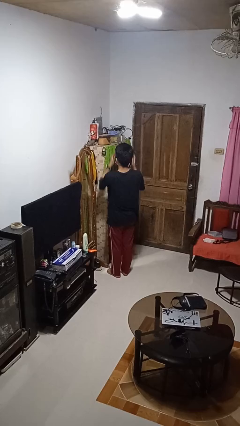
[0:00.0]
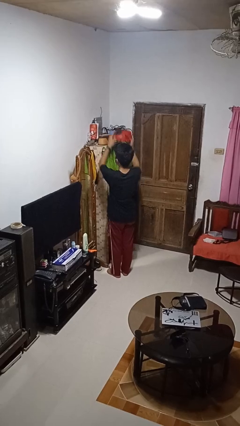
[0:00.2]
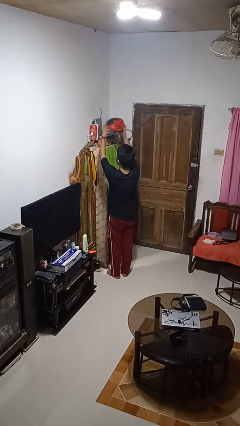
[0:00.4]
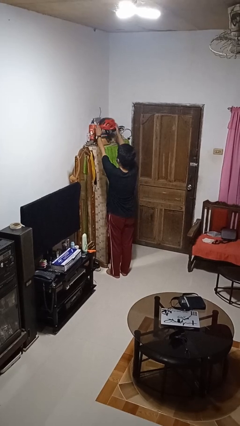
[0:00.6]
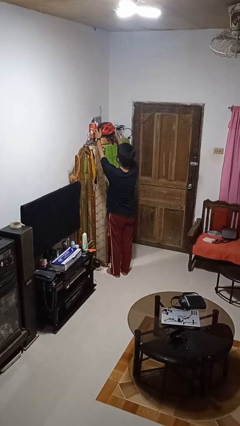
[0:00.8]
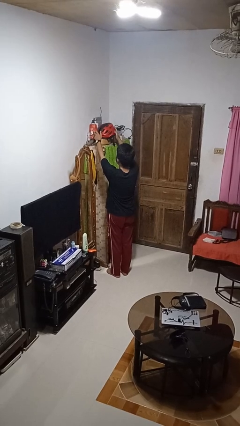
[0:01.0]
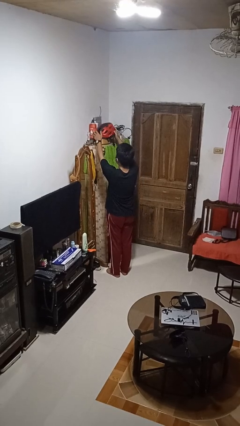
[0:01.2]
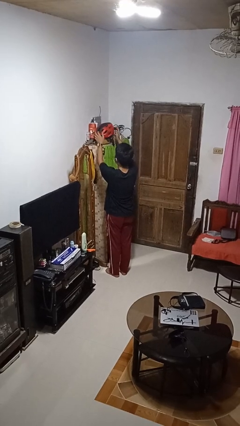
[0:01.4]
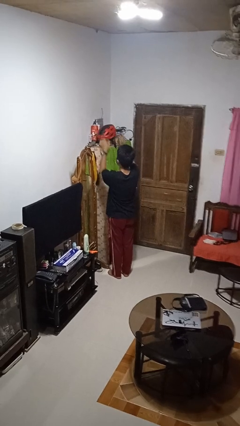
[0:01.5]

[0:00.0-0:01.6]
person puts down object on shelf

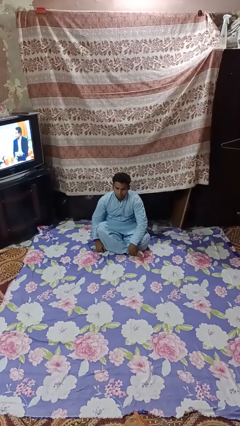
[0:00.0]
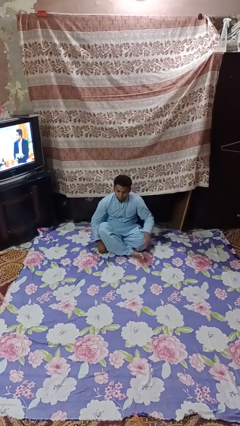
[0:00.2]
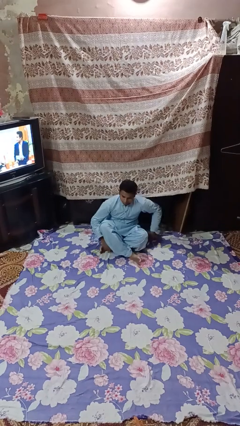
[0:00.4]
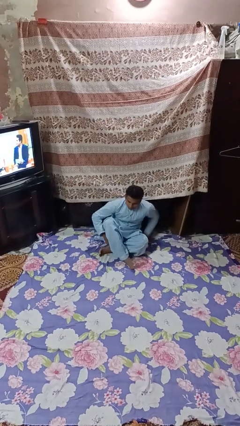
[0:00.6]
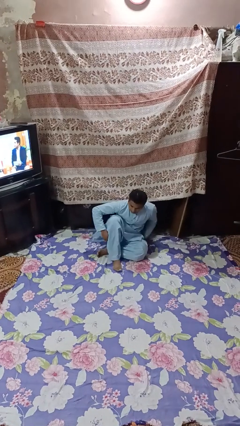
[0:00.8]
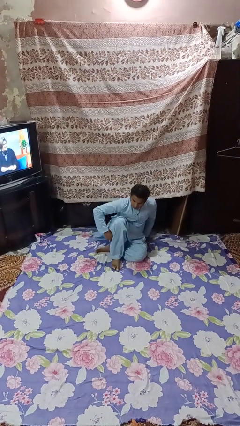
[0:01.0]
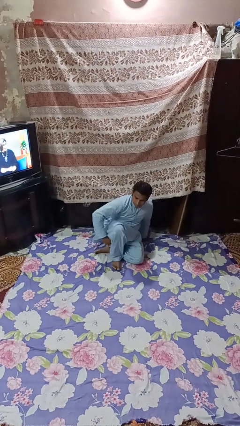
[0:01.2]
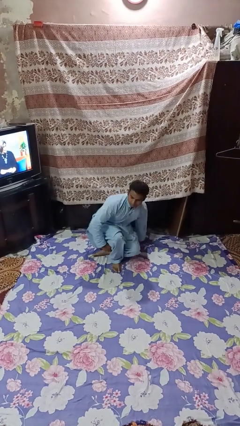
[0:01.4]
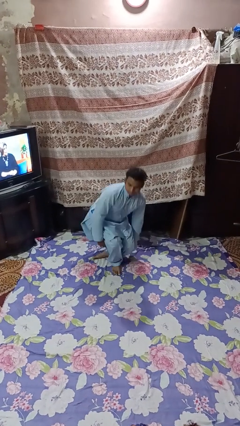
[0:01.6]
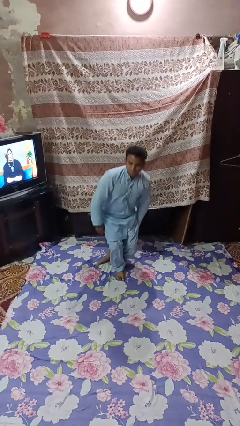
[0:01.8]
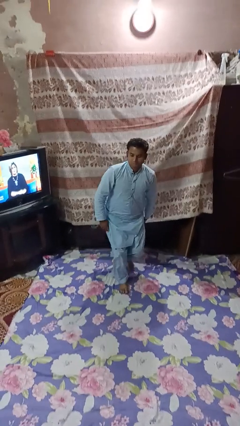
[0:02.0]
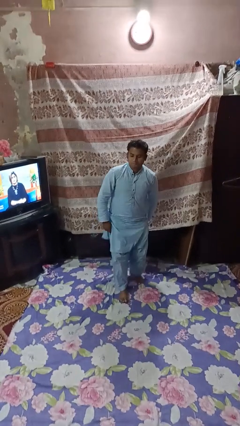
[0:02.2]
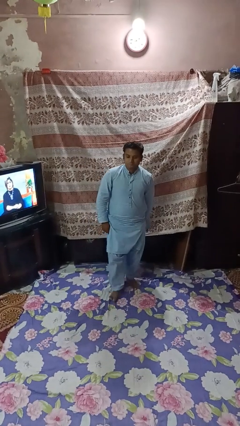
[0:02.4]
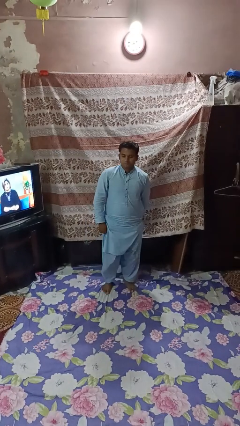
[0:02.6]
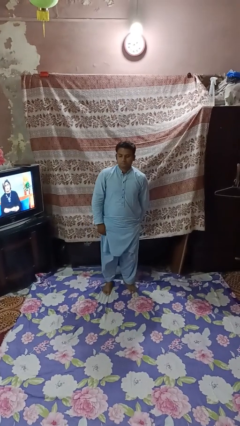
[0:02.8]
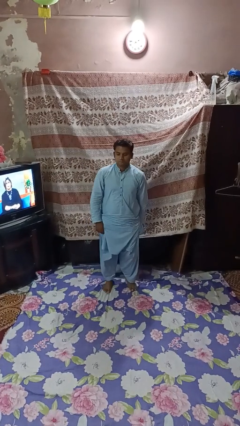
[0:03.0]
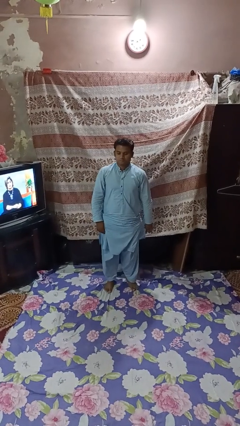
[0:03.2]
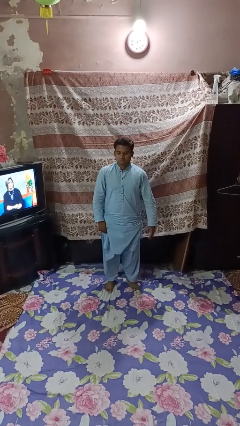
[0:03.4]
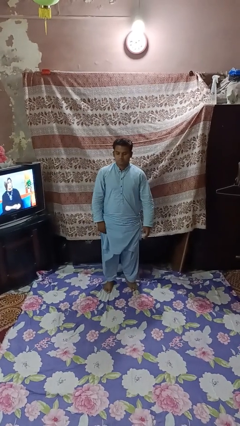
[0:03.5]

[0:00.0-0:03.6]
person stands up from floor

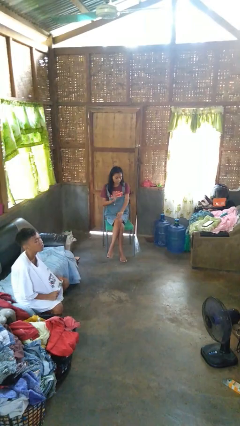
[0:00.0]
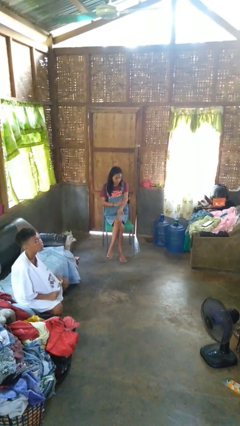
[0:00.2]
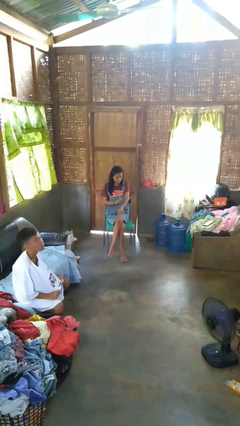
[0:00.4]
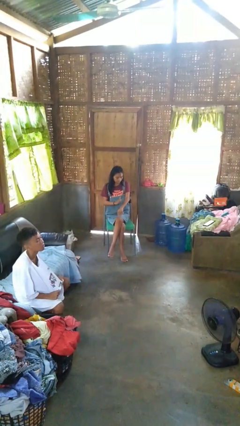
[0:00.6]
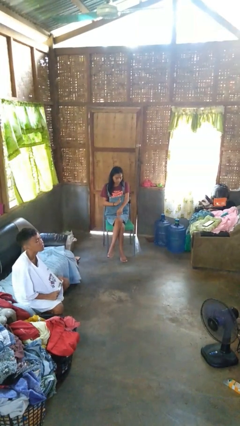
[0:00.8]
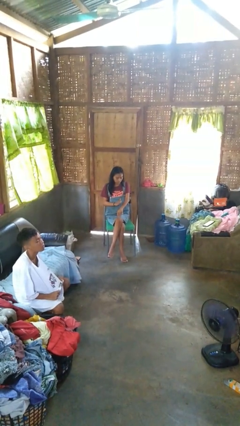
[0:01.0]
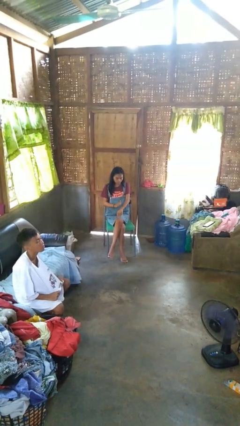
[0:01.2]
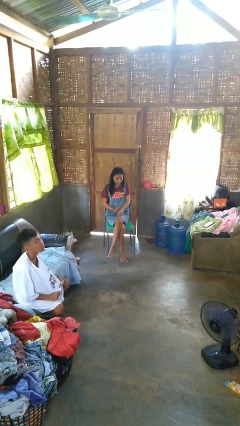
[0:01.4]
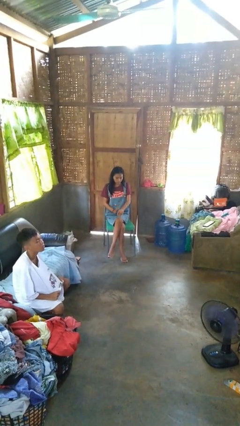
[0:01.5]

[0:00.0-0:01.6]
person swats bug

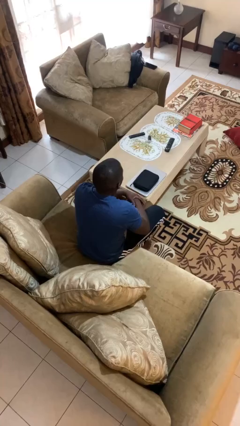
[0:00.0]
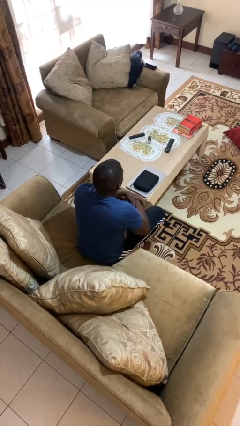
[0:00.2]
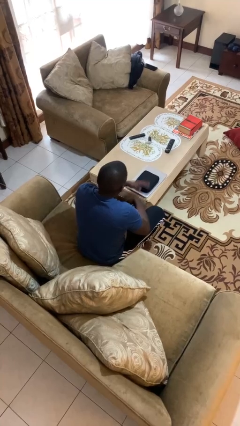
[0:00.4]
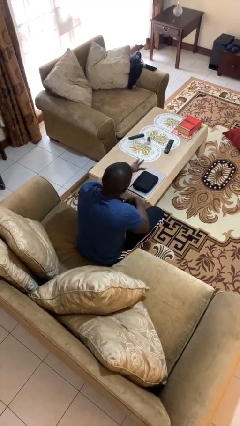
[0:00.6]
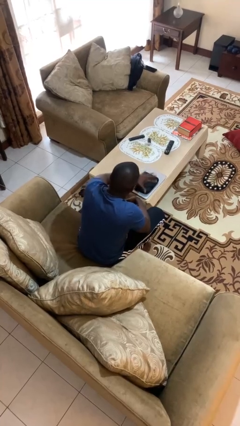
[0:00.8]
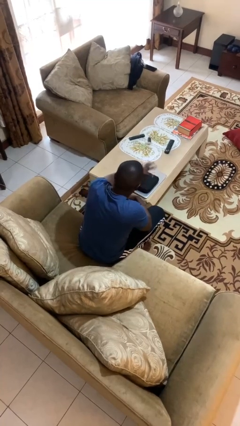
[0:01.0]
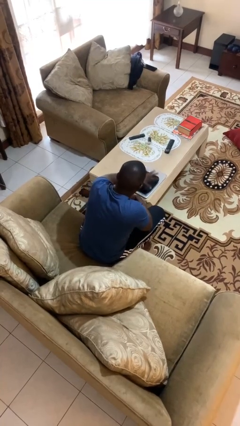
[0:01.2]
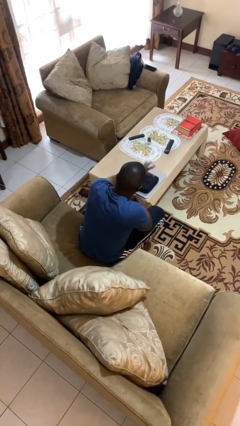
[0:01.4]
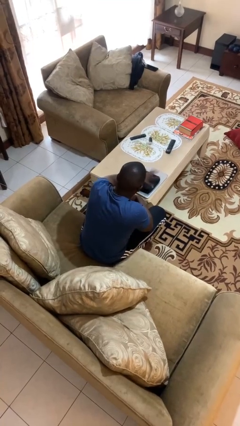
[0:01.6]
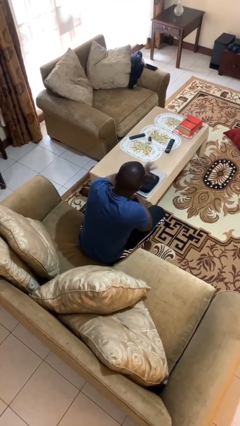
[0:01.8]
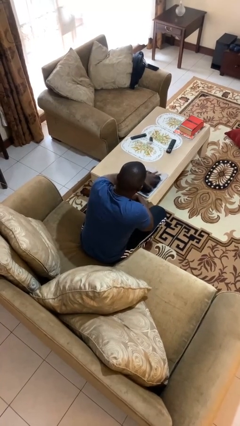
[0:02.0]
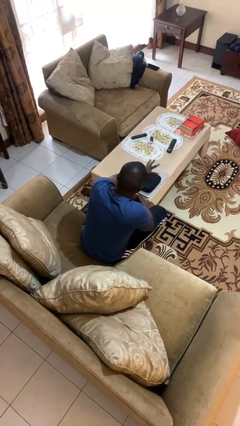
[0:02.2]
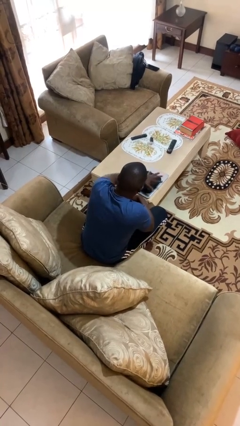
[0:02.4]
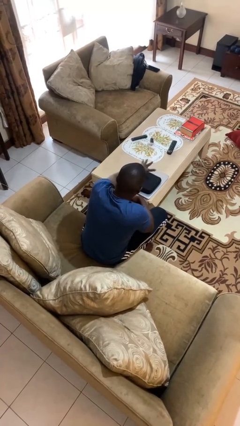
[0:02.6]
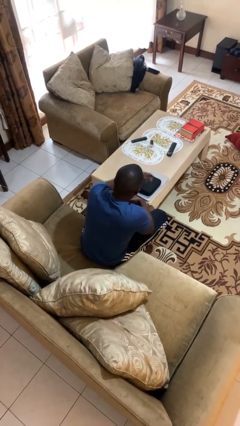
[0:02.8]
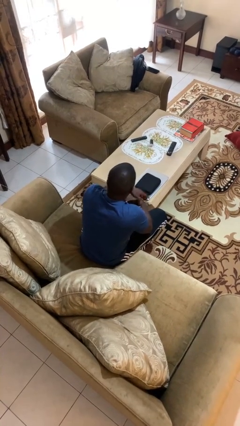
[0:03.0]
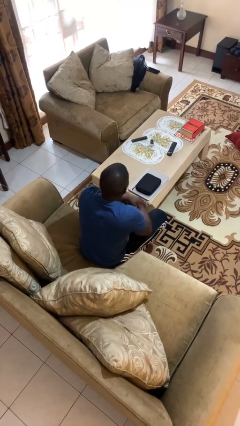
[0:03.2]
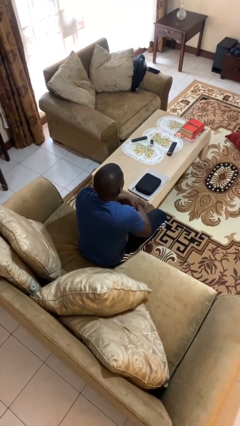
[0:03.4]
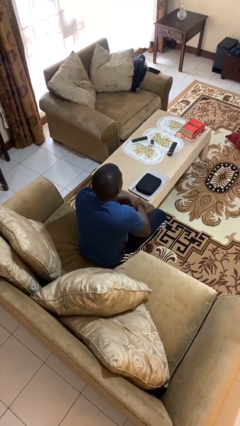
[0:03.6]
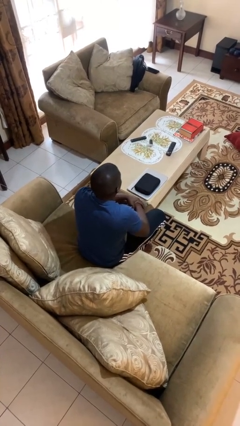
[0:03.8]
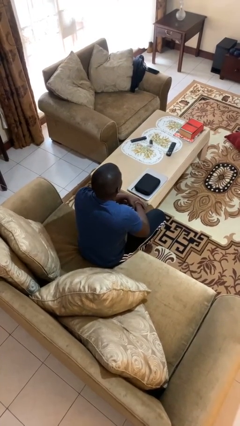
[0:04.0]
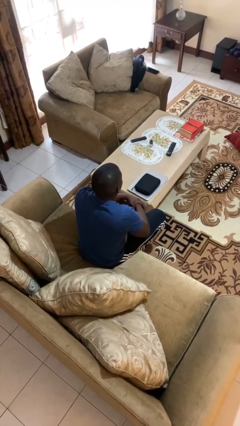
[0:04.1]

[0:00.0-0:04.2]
person waves hand over object

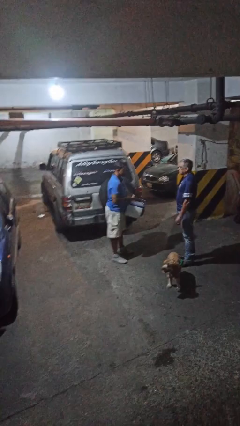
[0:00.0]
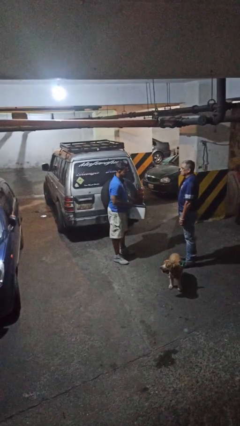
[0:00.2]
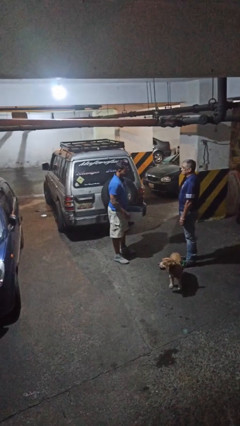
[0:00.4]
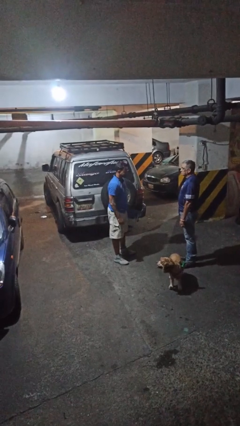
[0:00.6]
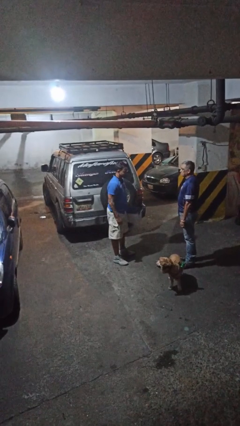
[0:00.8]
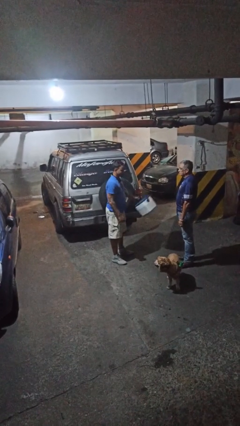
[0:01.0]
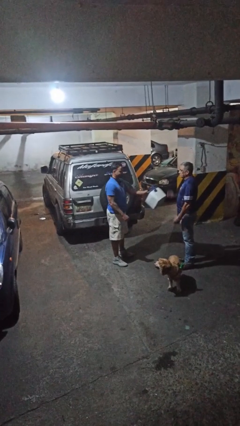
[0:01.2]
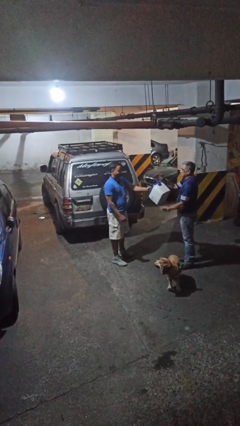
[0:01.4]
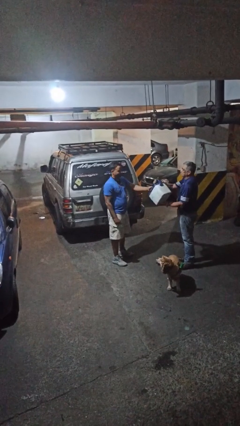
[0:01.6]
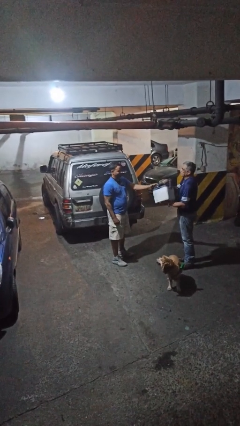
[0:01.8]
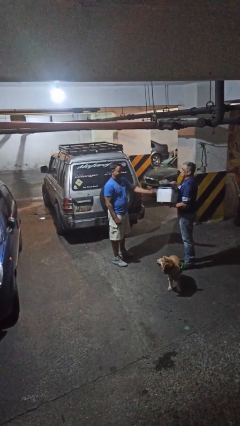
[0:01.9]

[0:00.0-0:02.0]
person transfers object to person

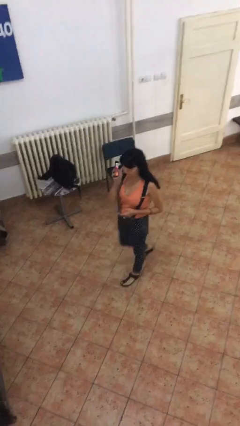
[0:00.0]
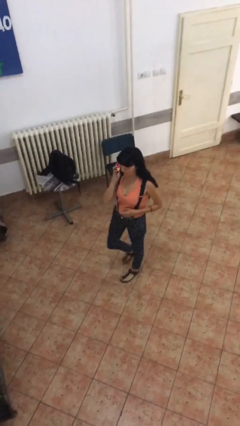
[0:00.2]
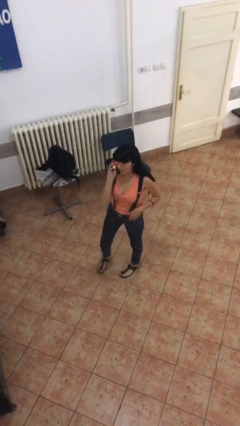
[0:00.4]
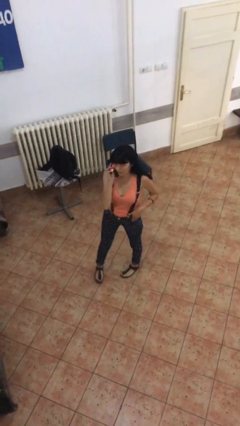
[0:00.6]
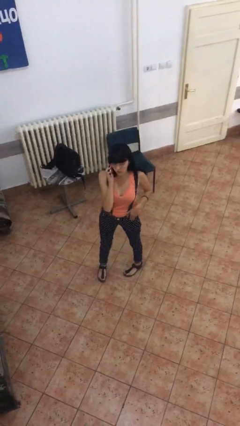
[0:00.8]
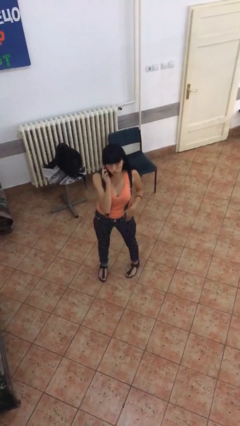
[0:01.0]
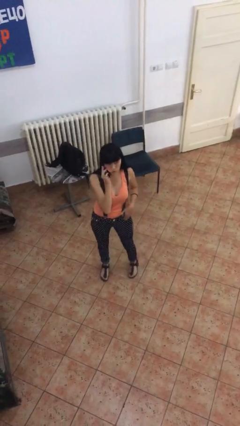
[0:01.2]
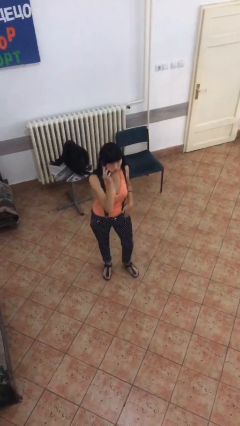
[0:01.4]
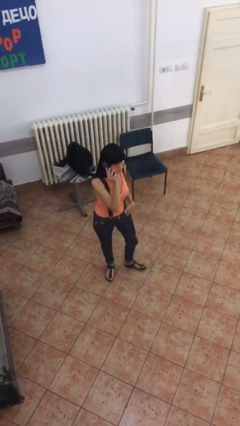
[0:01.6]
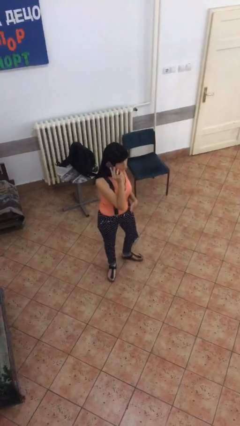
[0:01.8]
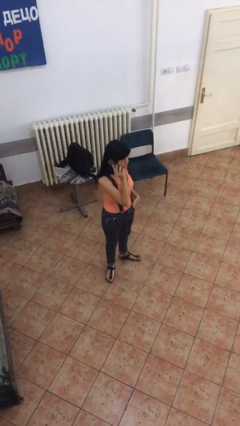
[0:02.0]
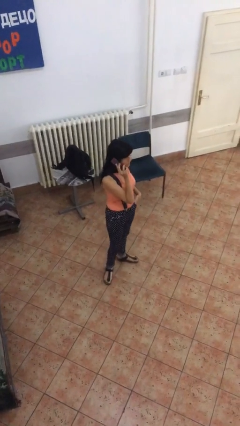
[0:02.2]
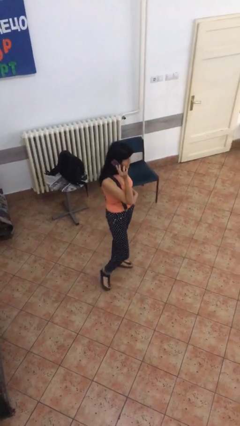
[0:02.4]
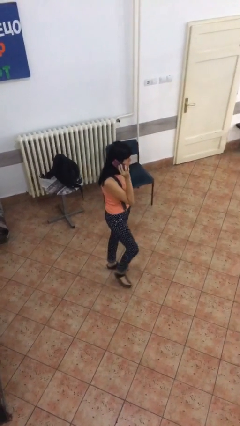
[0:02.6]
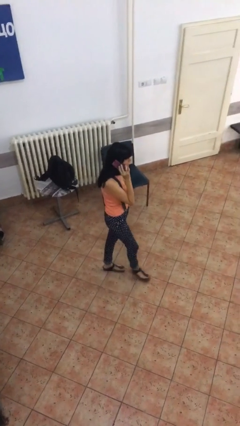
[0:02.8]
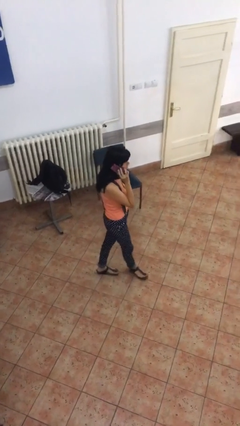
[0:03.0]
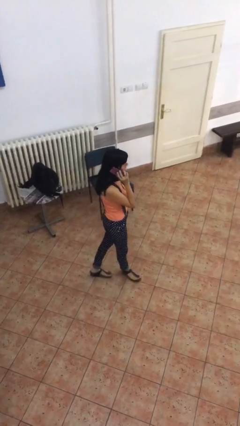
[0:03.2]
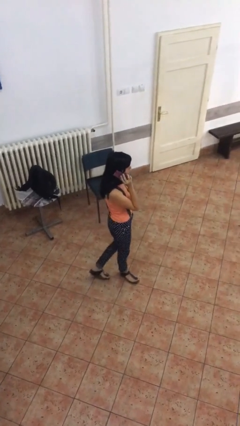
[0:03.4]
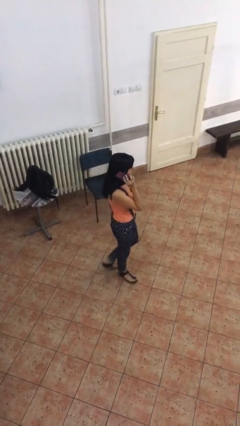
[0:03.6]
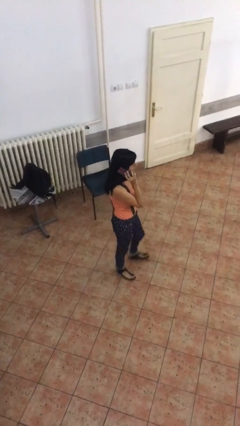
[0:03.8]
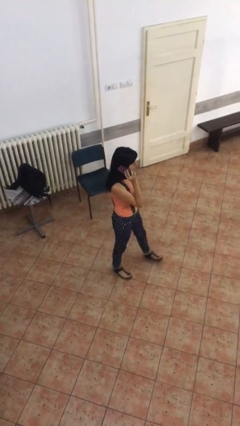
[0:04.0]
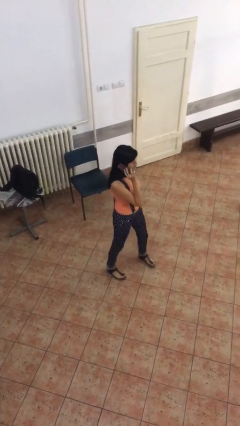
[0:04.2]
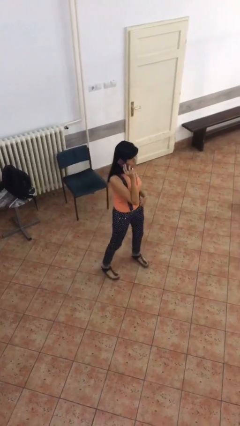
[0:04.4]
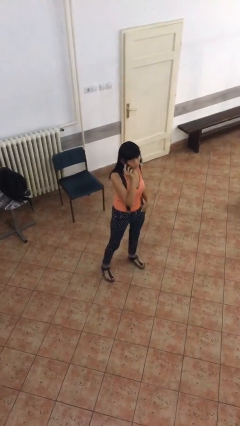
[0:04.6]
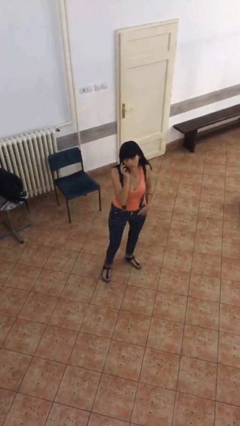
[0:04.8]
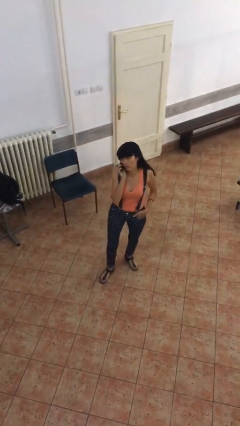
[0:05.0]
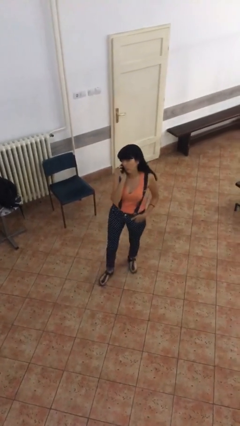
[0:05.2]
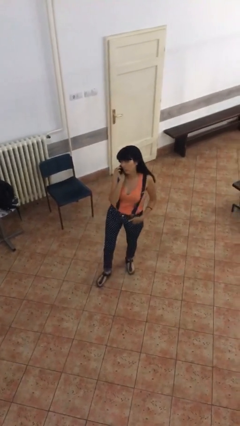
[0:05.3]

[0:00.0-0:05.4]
person talks on phone
